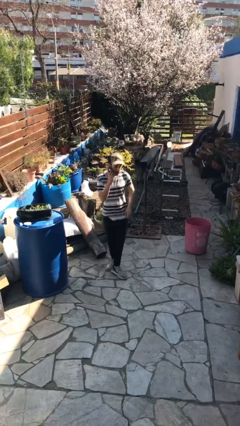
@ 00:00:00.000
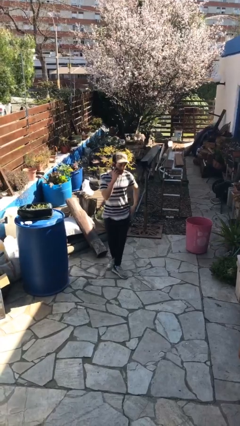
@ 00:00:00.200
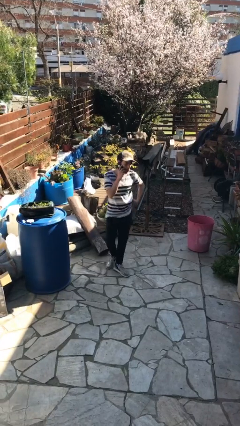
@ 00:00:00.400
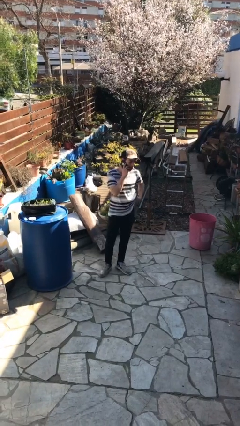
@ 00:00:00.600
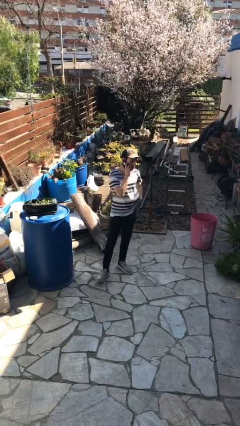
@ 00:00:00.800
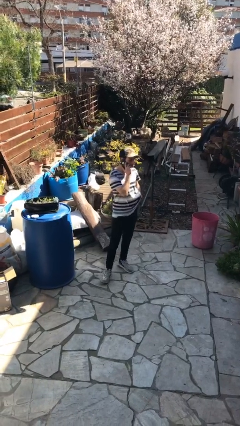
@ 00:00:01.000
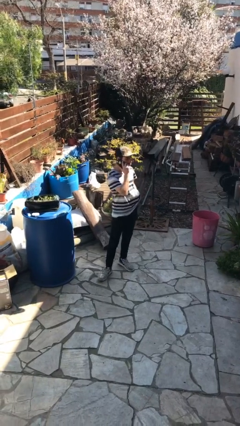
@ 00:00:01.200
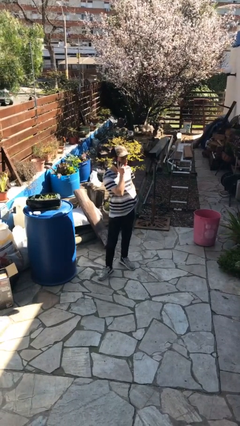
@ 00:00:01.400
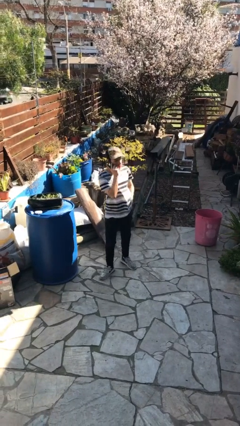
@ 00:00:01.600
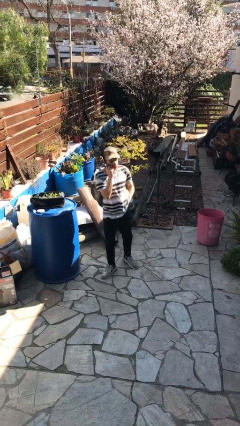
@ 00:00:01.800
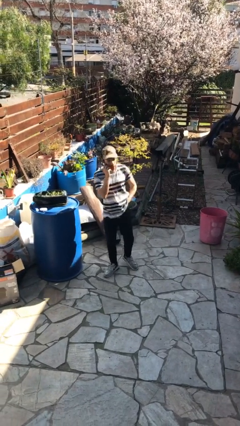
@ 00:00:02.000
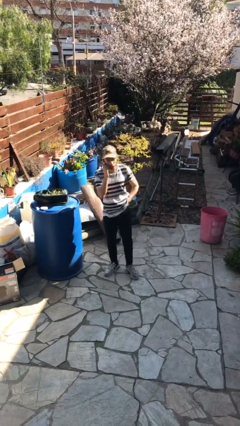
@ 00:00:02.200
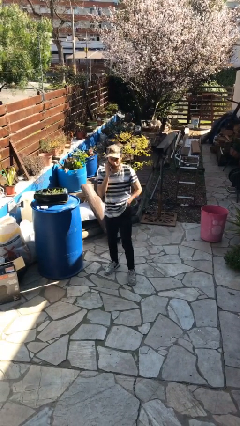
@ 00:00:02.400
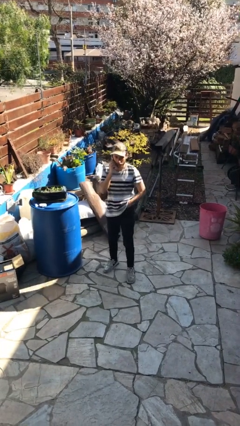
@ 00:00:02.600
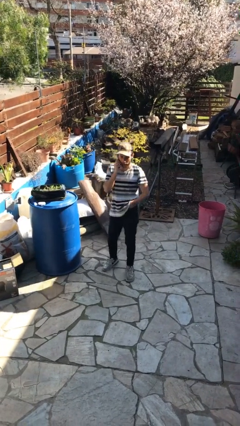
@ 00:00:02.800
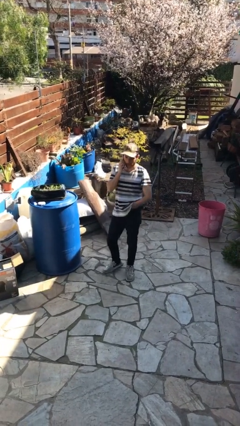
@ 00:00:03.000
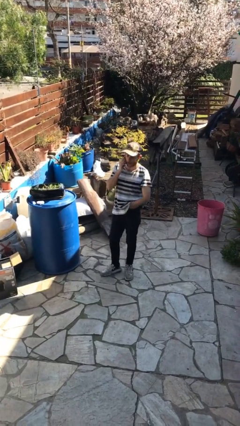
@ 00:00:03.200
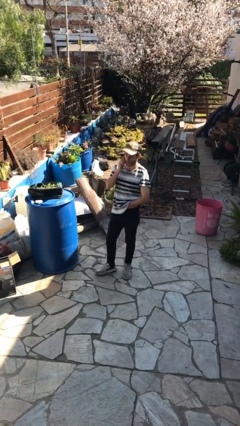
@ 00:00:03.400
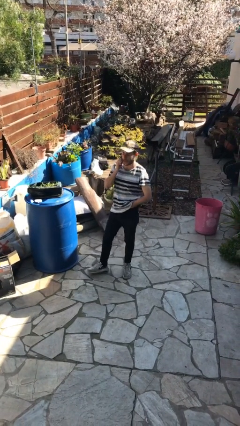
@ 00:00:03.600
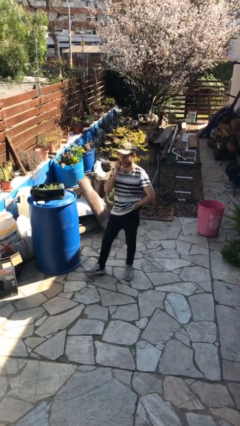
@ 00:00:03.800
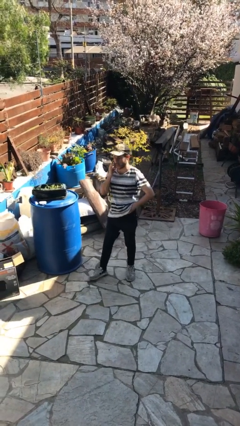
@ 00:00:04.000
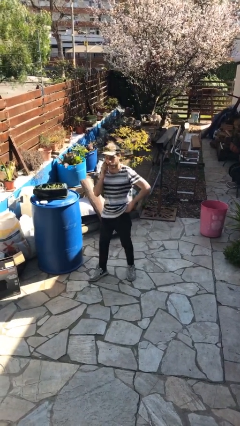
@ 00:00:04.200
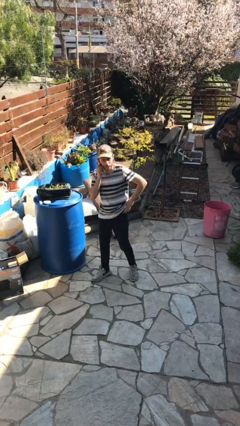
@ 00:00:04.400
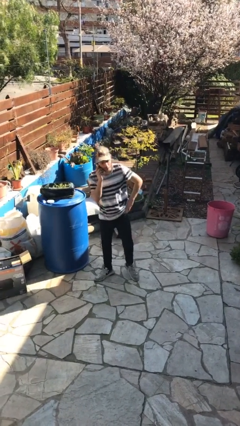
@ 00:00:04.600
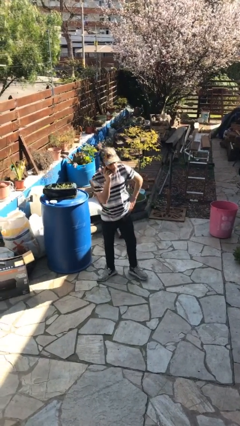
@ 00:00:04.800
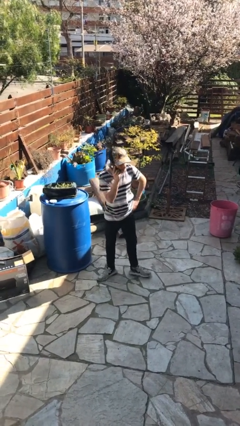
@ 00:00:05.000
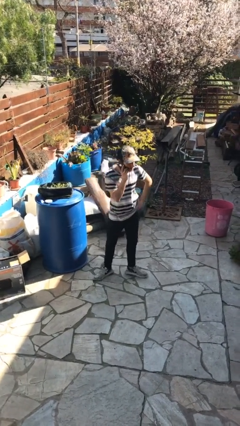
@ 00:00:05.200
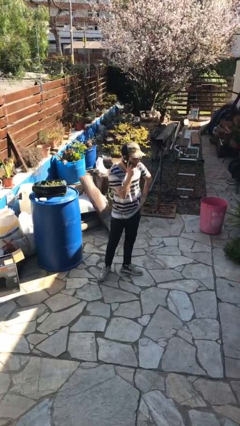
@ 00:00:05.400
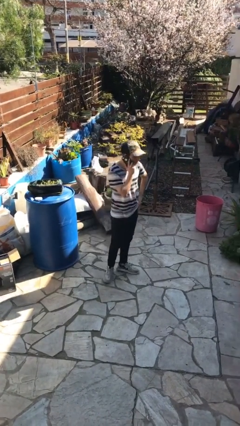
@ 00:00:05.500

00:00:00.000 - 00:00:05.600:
person talks on phone

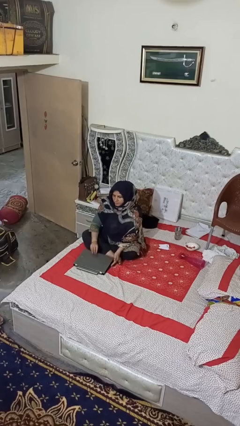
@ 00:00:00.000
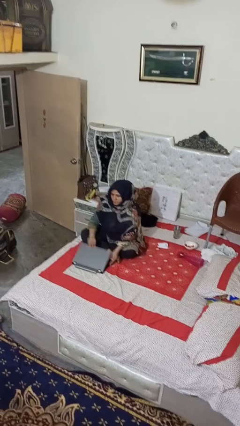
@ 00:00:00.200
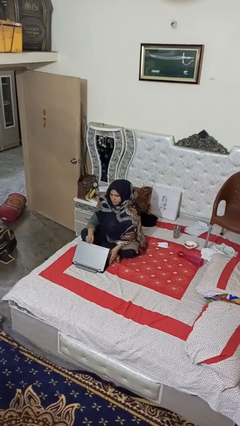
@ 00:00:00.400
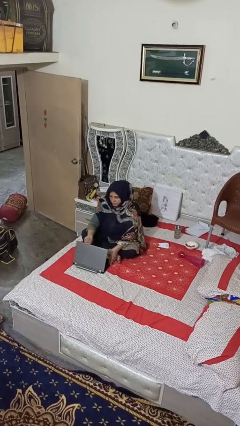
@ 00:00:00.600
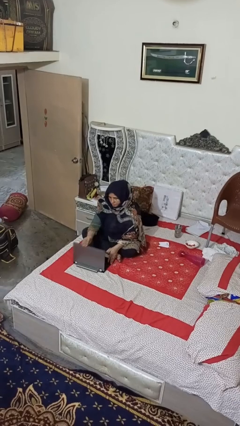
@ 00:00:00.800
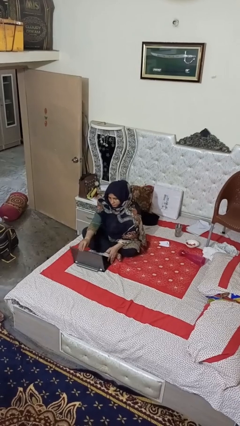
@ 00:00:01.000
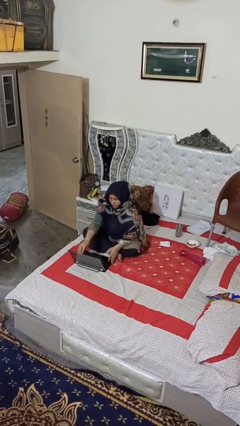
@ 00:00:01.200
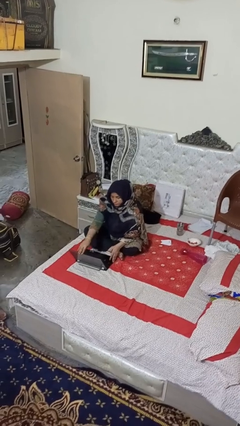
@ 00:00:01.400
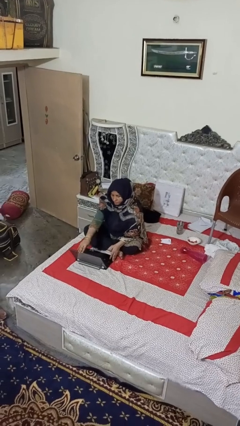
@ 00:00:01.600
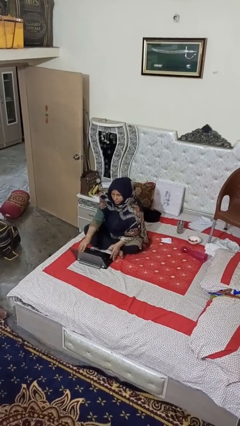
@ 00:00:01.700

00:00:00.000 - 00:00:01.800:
person opens laptop

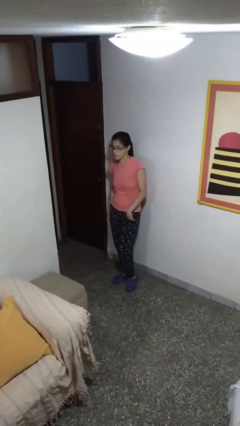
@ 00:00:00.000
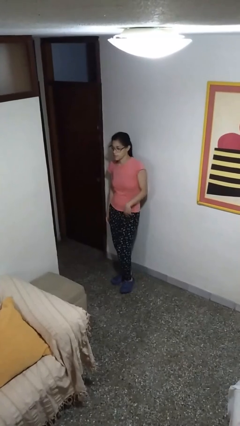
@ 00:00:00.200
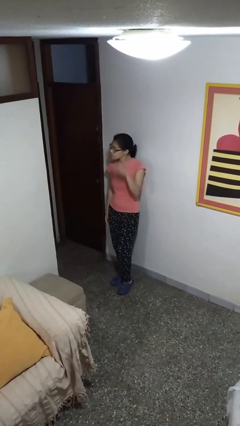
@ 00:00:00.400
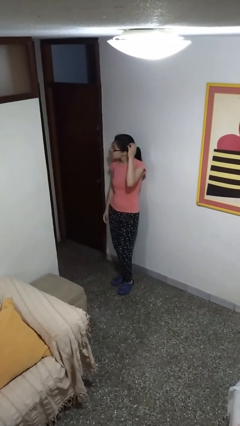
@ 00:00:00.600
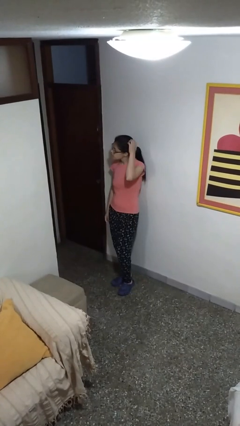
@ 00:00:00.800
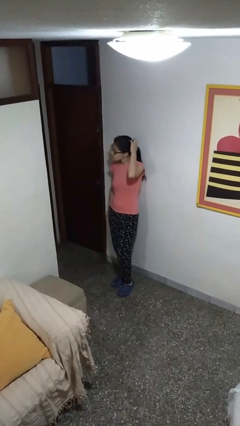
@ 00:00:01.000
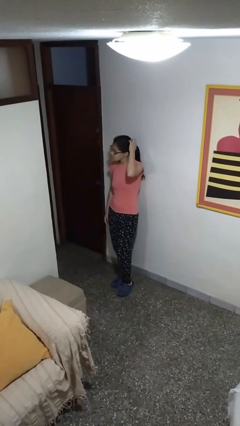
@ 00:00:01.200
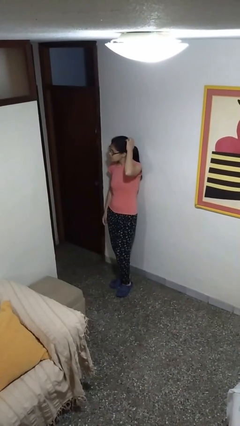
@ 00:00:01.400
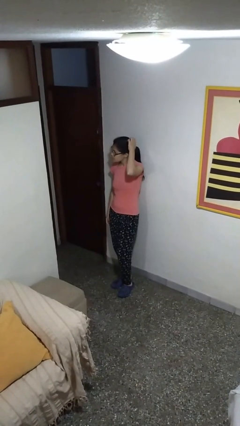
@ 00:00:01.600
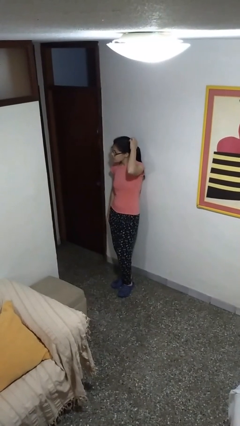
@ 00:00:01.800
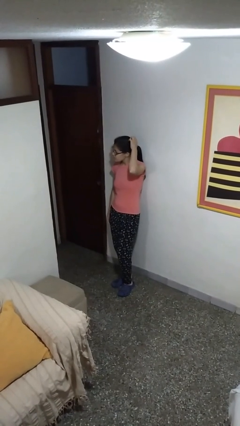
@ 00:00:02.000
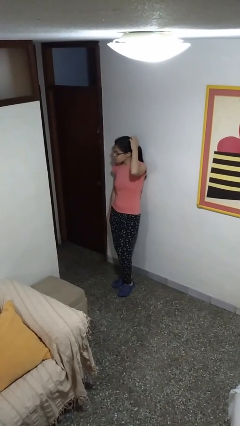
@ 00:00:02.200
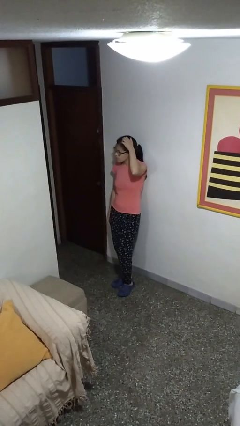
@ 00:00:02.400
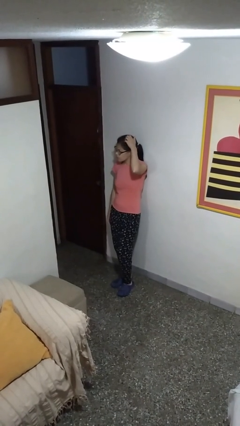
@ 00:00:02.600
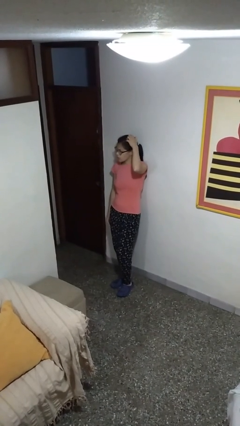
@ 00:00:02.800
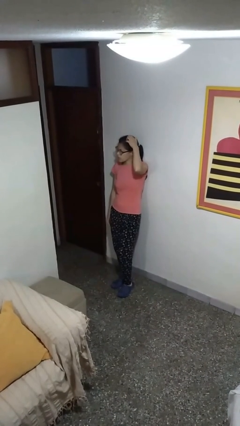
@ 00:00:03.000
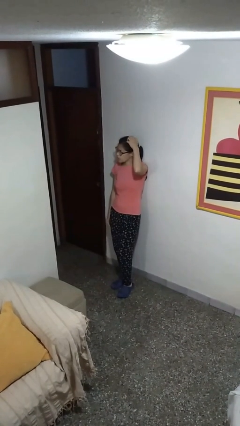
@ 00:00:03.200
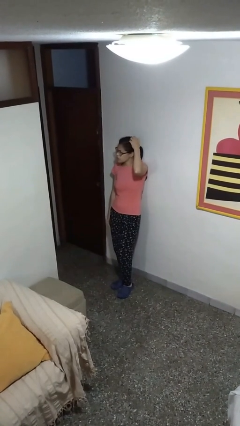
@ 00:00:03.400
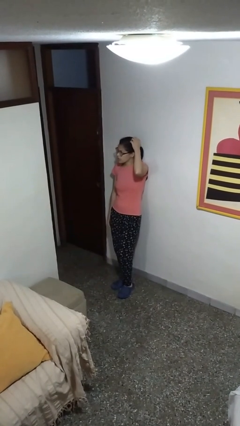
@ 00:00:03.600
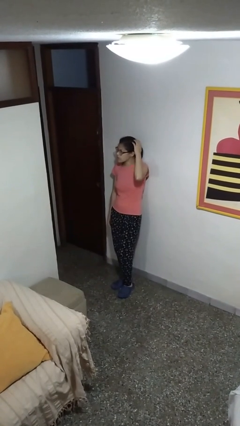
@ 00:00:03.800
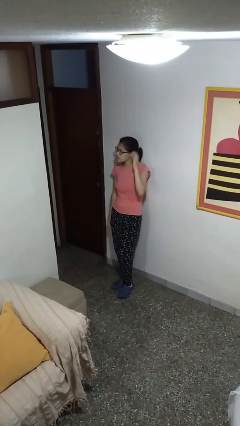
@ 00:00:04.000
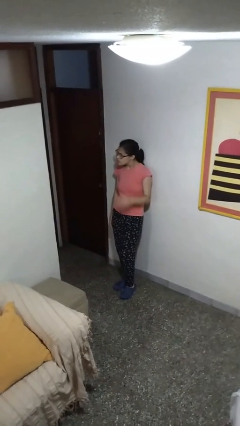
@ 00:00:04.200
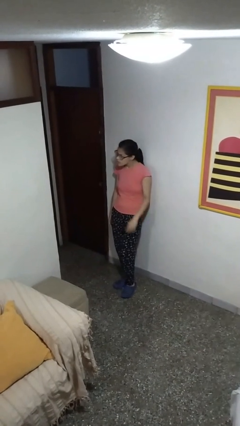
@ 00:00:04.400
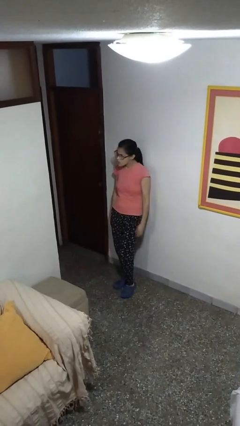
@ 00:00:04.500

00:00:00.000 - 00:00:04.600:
person scratches face

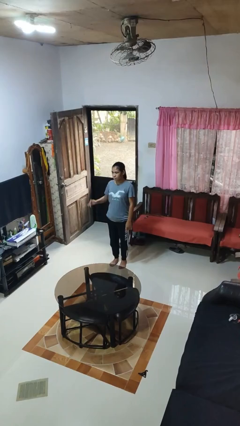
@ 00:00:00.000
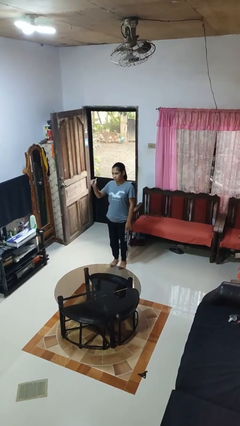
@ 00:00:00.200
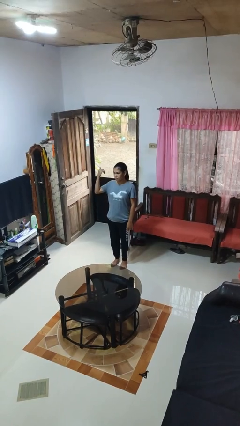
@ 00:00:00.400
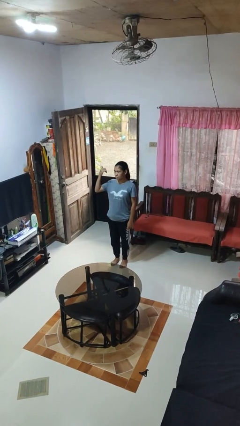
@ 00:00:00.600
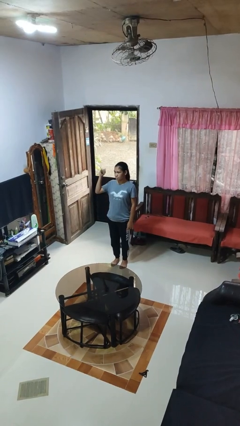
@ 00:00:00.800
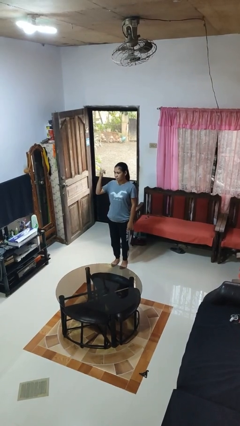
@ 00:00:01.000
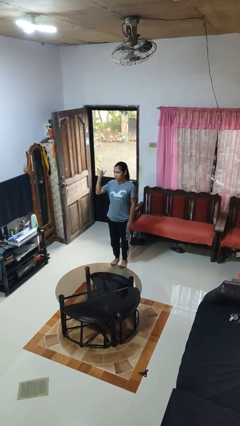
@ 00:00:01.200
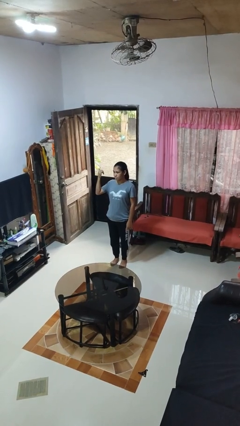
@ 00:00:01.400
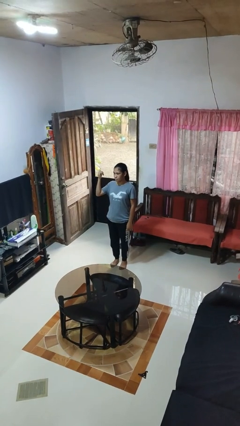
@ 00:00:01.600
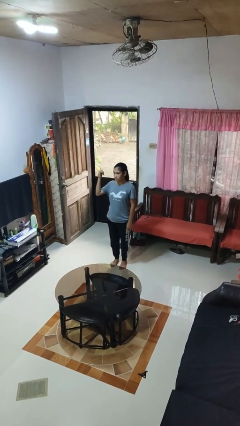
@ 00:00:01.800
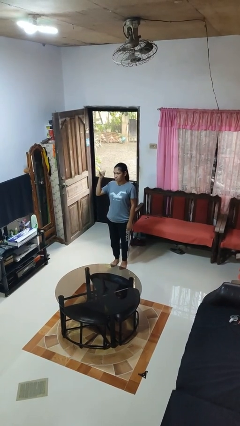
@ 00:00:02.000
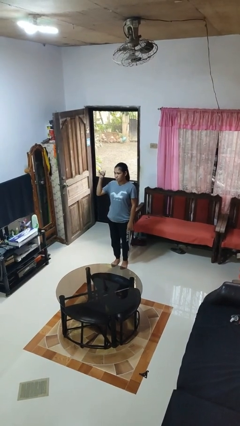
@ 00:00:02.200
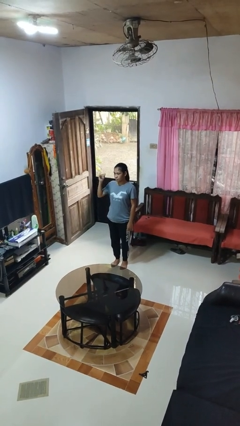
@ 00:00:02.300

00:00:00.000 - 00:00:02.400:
person gestures hang loose

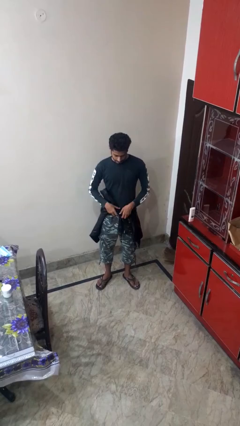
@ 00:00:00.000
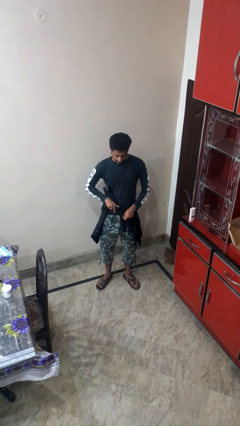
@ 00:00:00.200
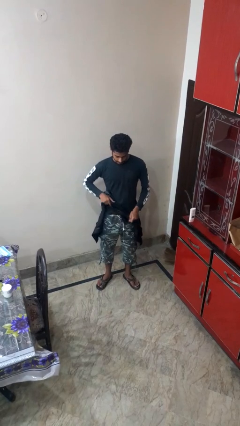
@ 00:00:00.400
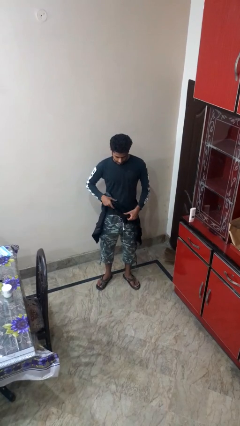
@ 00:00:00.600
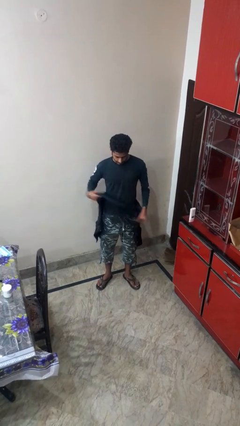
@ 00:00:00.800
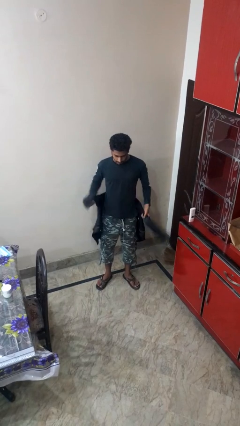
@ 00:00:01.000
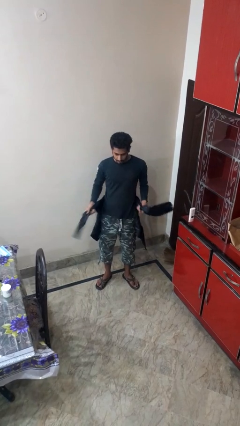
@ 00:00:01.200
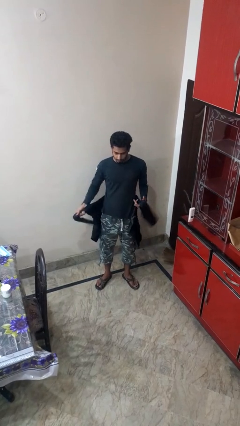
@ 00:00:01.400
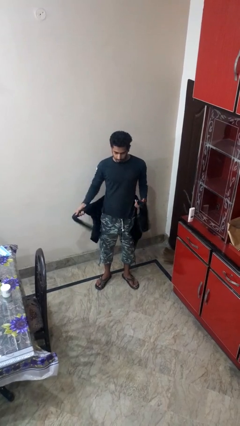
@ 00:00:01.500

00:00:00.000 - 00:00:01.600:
person unties jacket around waist

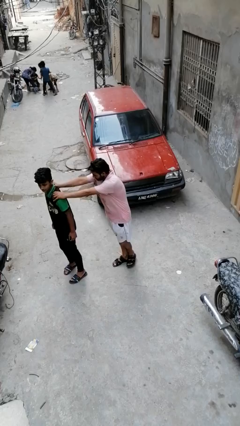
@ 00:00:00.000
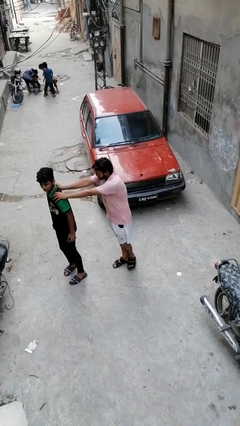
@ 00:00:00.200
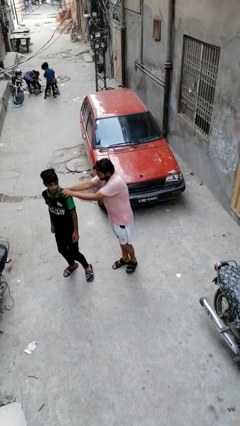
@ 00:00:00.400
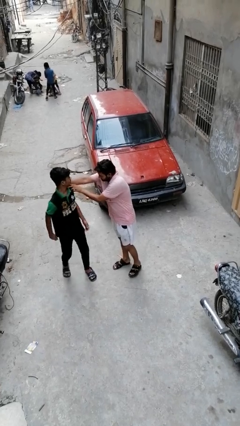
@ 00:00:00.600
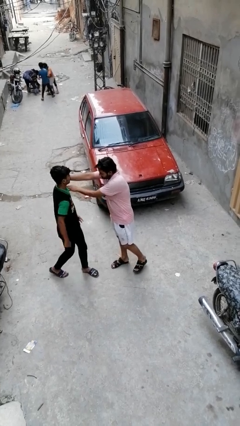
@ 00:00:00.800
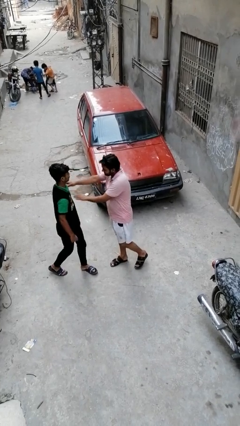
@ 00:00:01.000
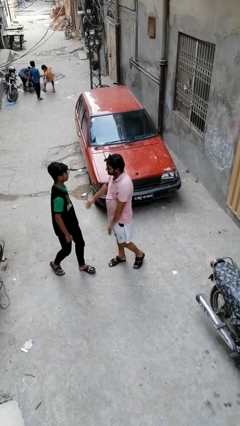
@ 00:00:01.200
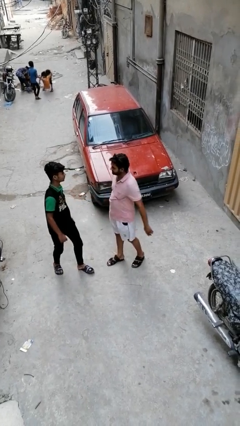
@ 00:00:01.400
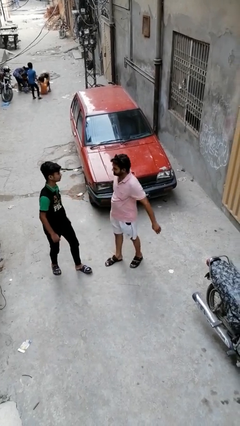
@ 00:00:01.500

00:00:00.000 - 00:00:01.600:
person spins person around
